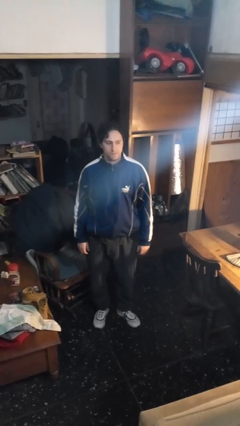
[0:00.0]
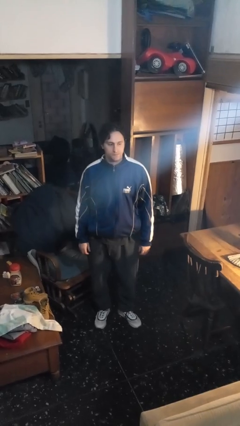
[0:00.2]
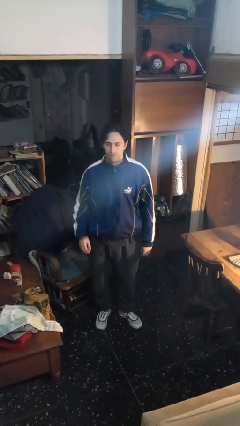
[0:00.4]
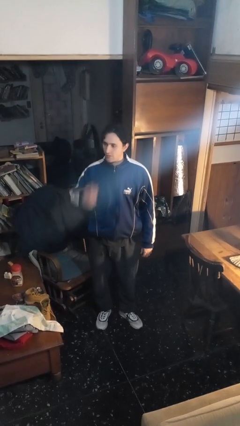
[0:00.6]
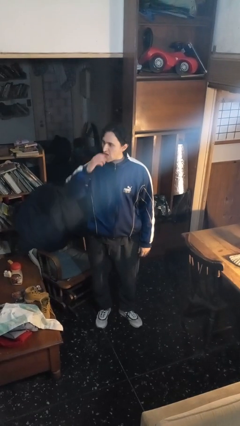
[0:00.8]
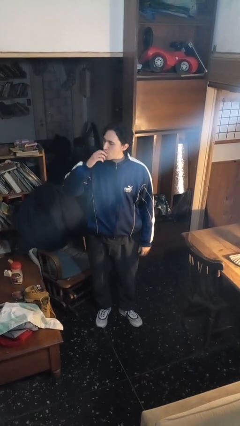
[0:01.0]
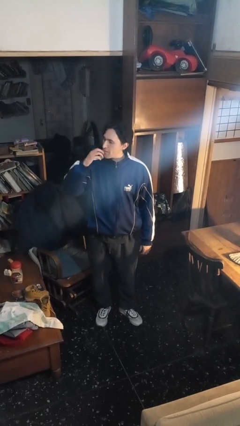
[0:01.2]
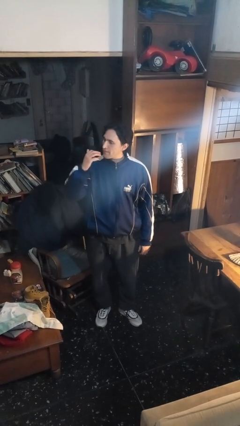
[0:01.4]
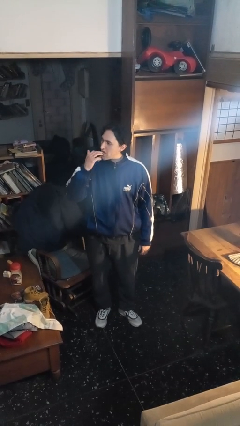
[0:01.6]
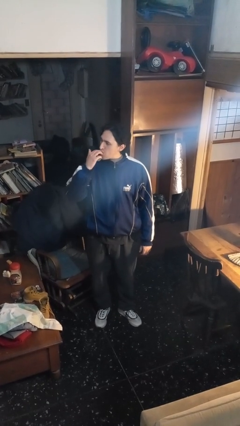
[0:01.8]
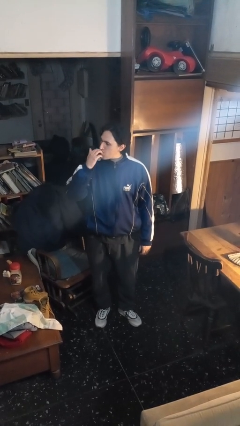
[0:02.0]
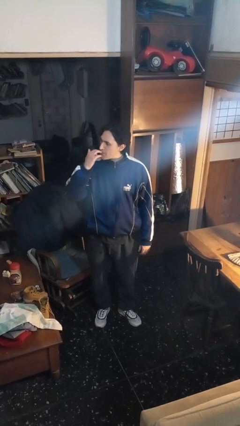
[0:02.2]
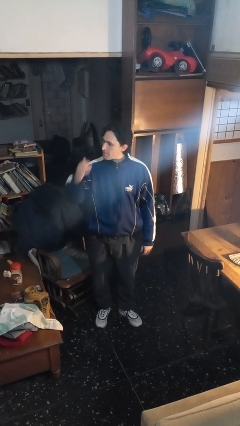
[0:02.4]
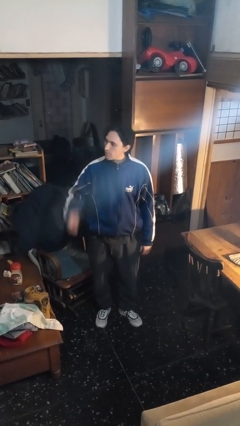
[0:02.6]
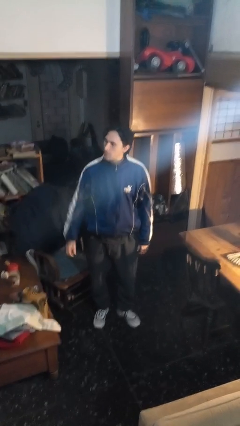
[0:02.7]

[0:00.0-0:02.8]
person licks fingers

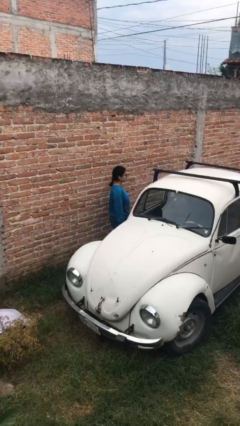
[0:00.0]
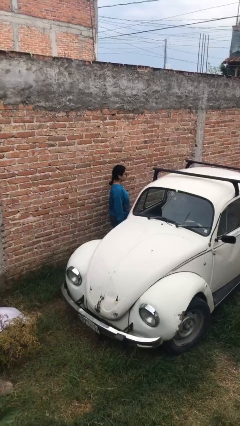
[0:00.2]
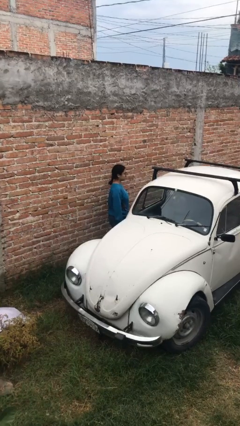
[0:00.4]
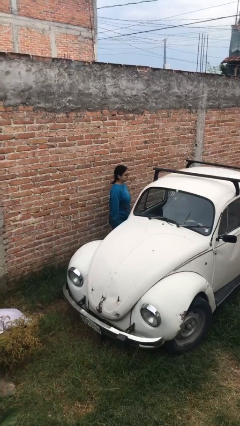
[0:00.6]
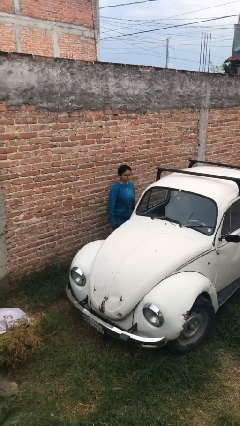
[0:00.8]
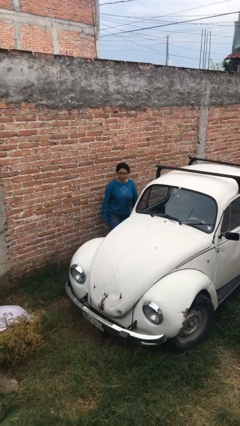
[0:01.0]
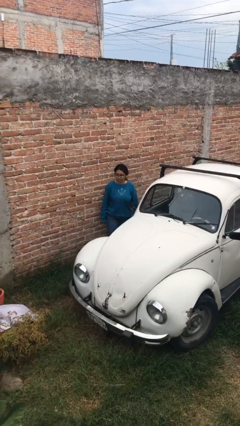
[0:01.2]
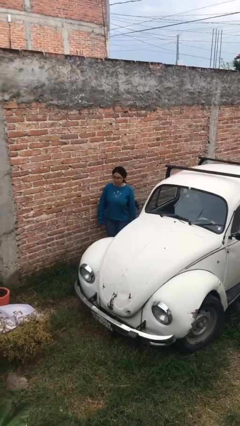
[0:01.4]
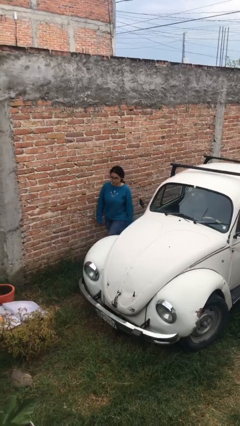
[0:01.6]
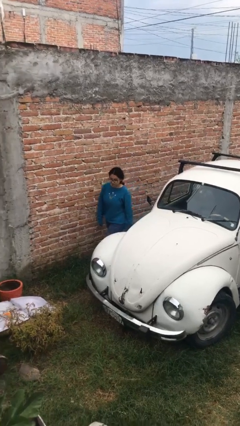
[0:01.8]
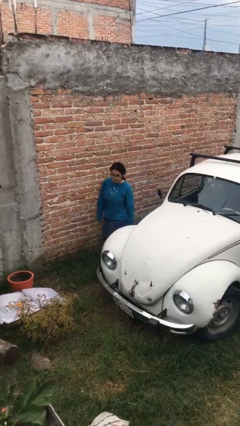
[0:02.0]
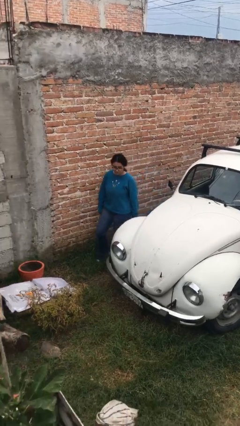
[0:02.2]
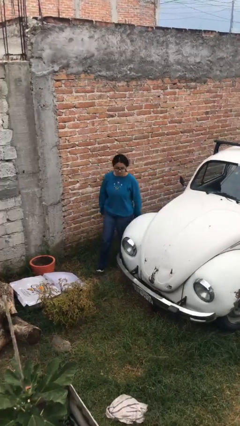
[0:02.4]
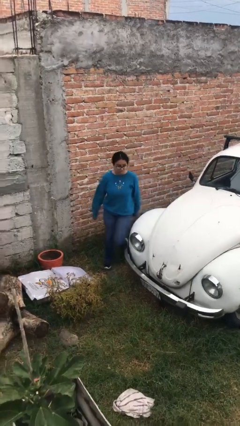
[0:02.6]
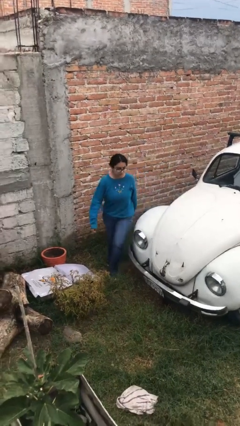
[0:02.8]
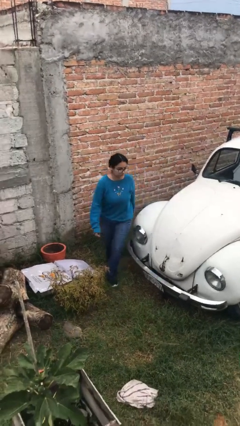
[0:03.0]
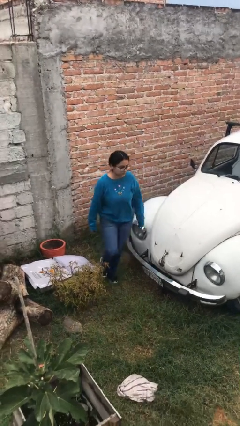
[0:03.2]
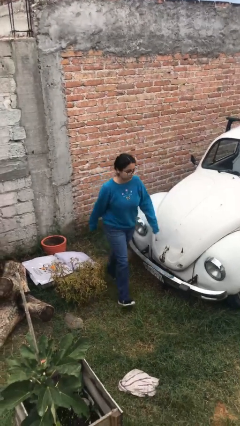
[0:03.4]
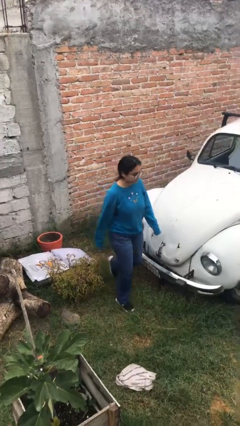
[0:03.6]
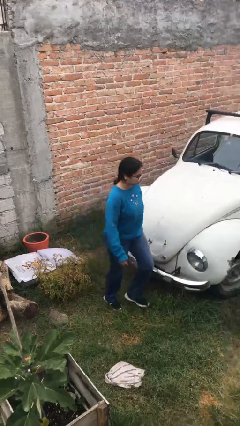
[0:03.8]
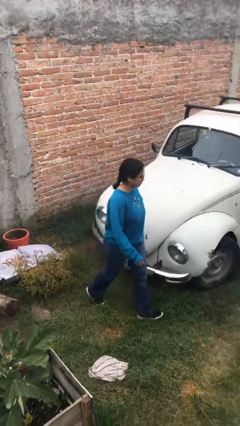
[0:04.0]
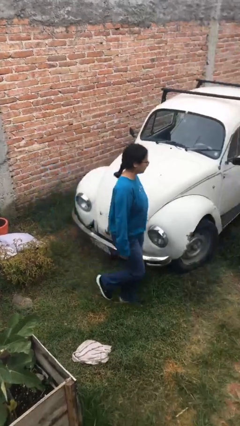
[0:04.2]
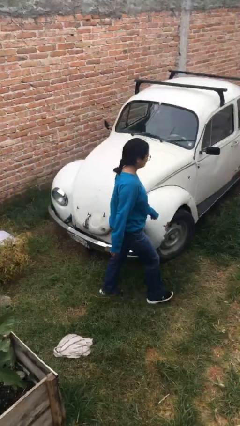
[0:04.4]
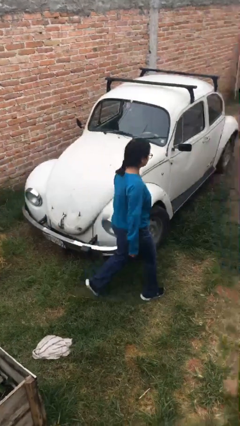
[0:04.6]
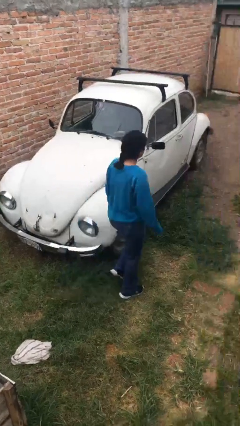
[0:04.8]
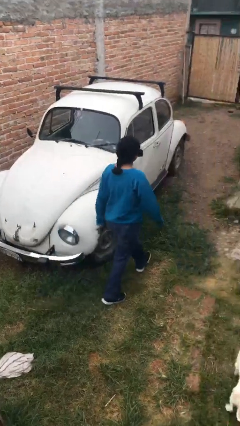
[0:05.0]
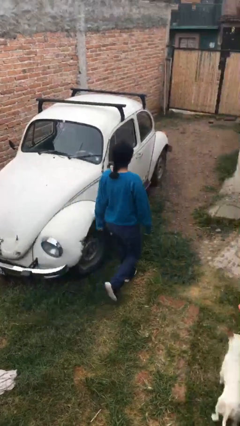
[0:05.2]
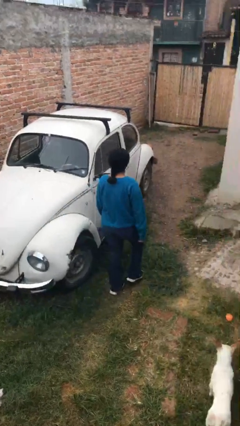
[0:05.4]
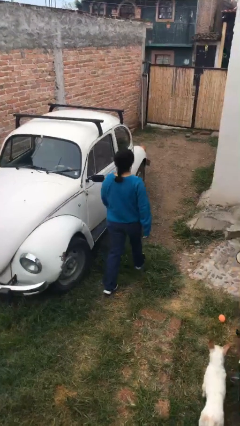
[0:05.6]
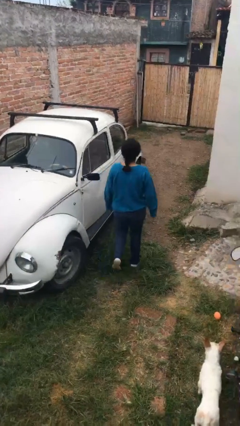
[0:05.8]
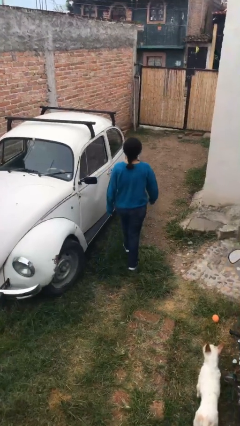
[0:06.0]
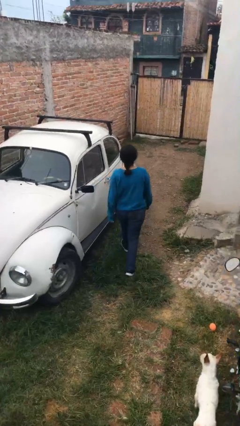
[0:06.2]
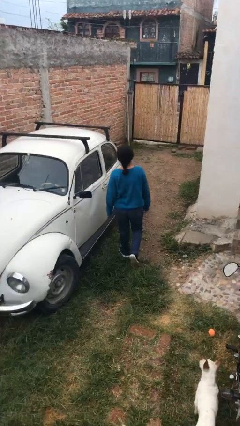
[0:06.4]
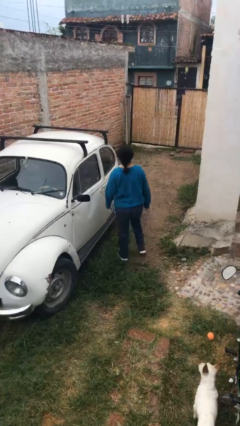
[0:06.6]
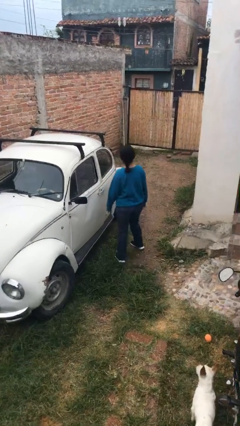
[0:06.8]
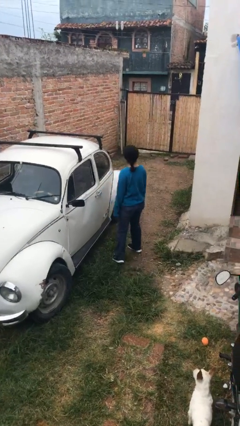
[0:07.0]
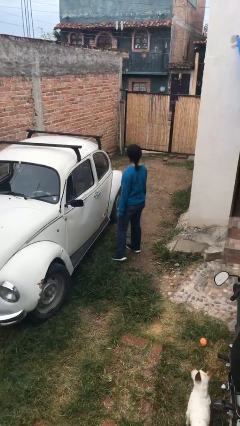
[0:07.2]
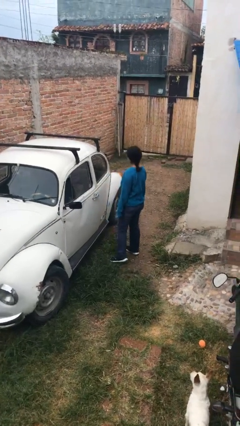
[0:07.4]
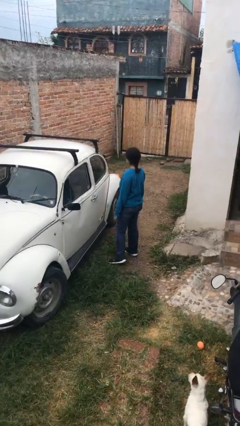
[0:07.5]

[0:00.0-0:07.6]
person walks around car

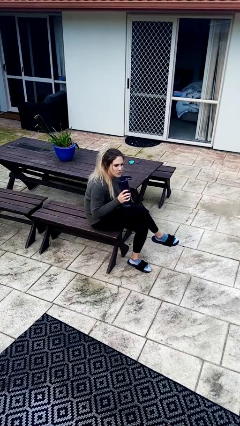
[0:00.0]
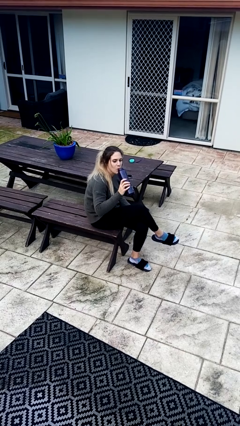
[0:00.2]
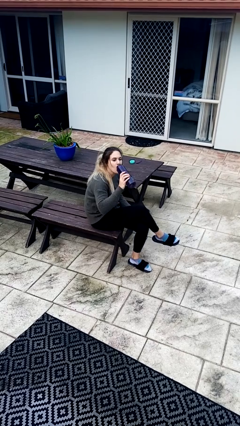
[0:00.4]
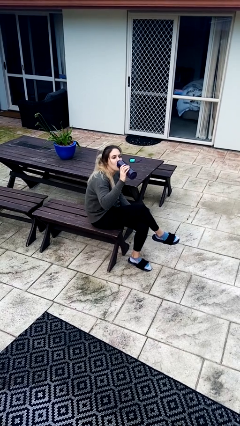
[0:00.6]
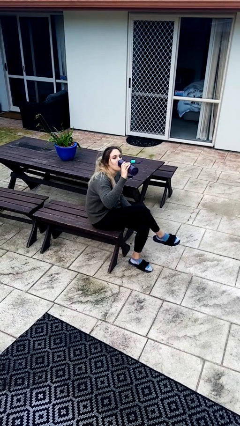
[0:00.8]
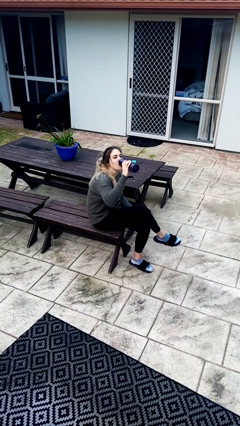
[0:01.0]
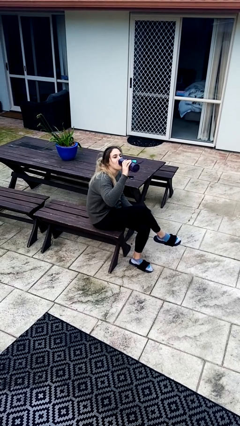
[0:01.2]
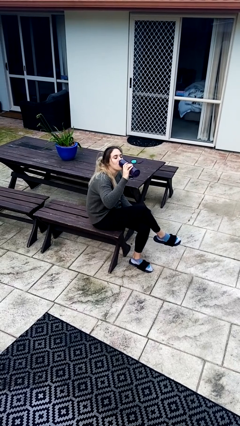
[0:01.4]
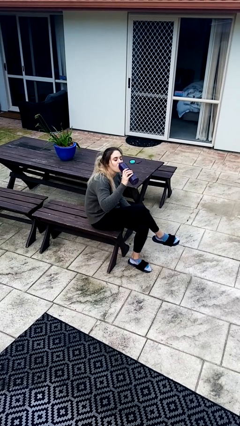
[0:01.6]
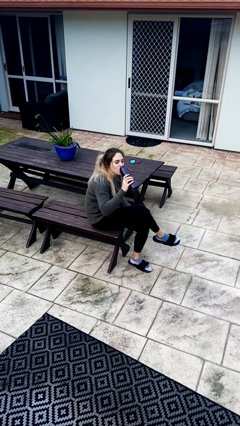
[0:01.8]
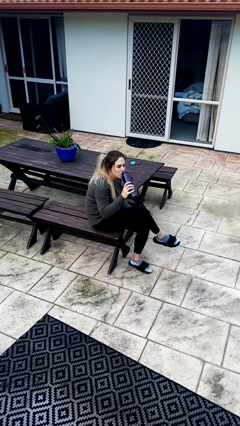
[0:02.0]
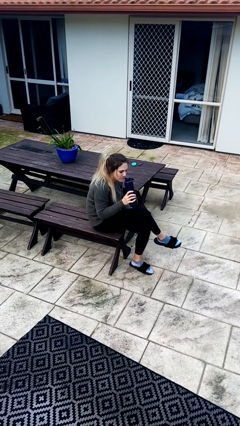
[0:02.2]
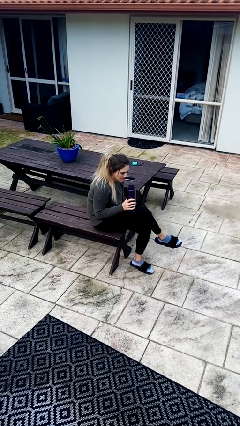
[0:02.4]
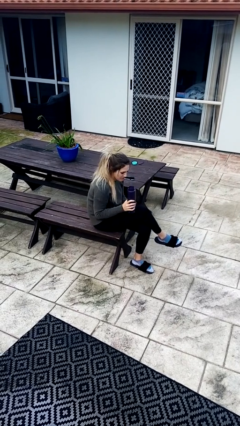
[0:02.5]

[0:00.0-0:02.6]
person drinks from bottle

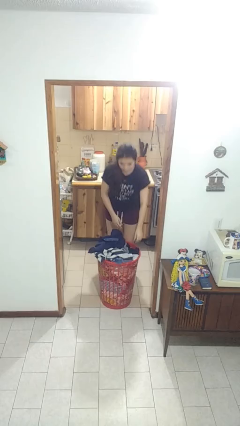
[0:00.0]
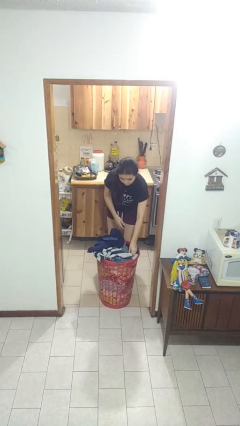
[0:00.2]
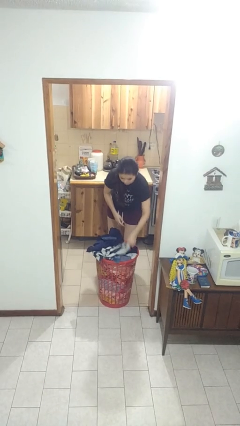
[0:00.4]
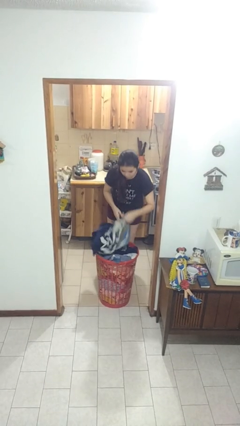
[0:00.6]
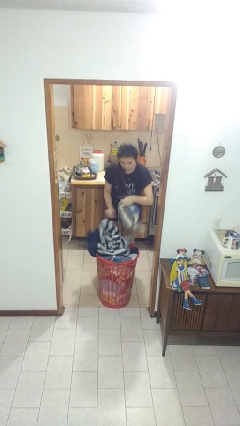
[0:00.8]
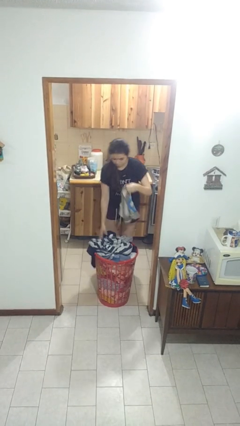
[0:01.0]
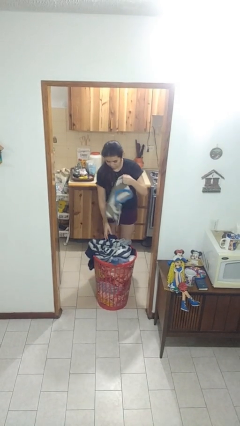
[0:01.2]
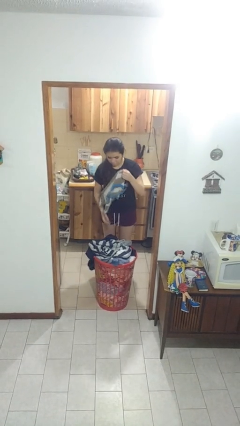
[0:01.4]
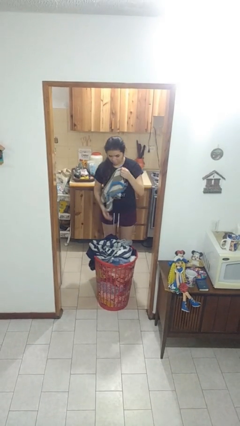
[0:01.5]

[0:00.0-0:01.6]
person takes object from basket

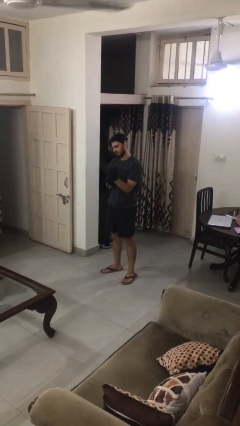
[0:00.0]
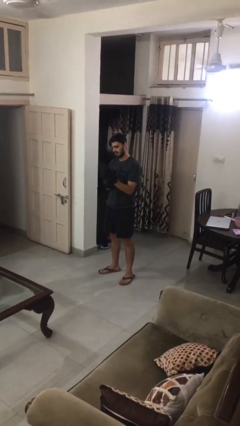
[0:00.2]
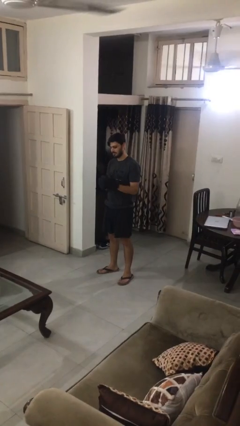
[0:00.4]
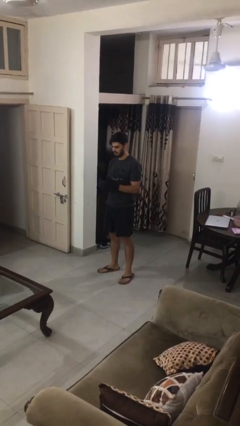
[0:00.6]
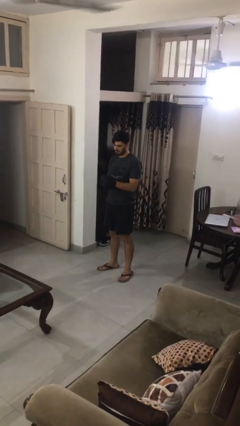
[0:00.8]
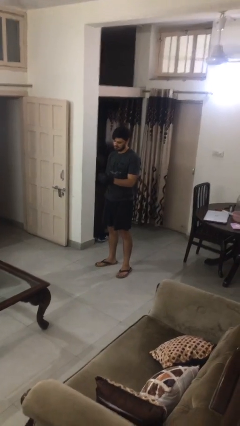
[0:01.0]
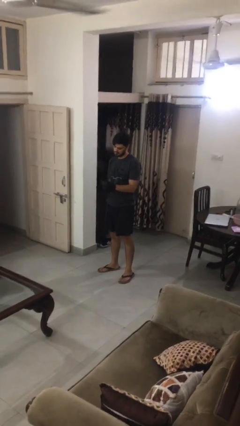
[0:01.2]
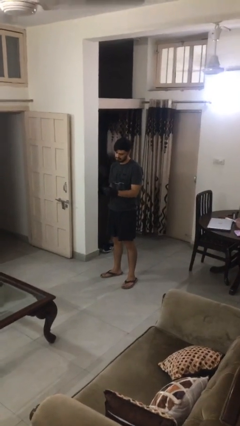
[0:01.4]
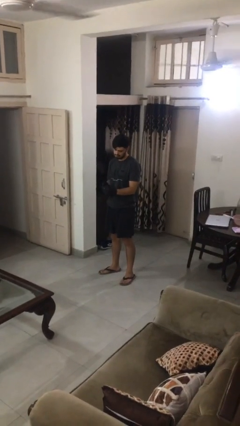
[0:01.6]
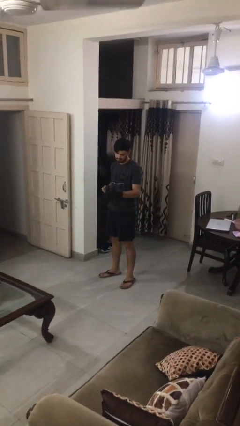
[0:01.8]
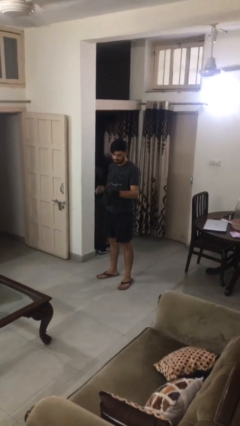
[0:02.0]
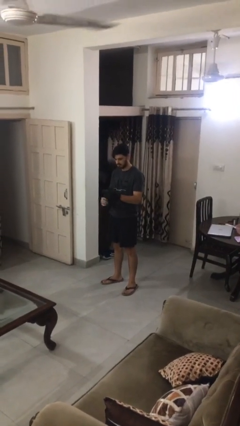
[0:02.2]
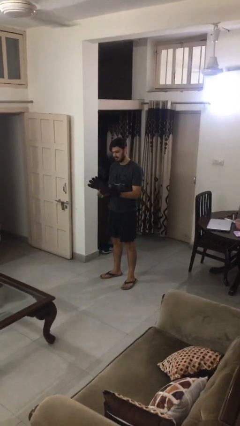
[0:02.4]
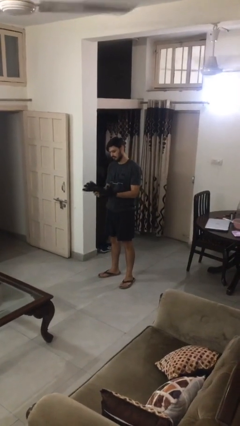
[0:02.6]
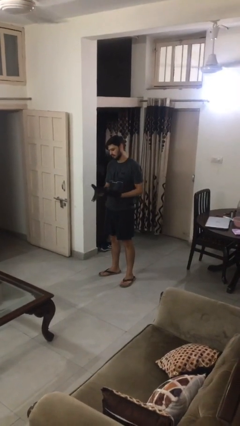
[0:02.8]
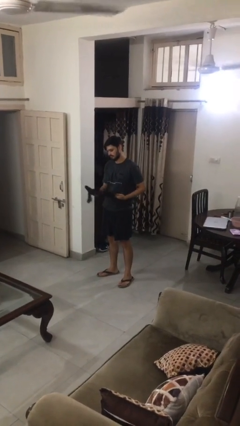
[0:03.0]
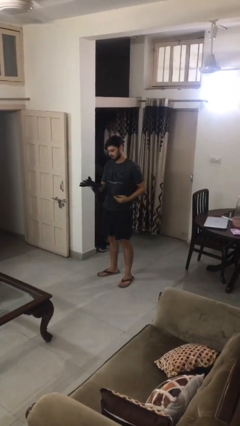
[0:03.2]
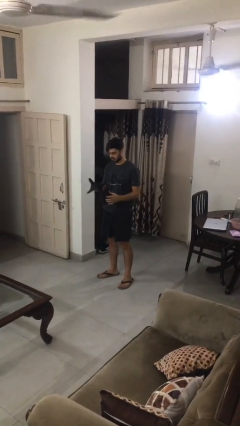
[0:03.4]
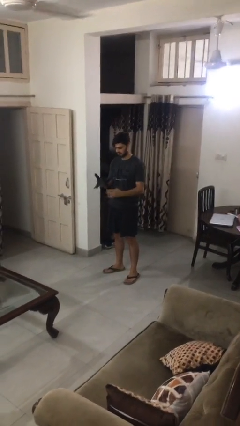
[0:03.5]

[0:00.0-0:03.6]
person takes off gloves
